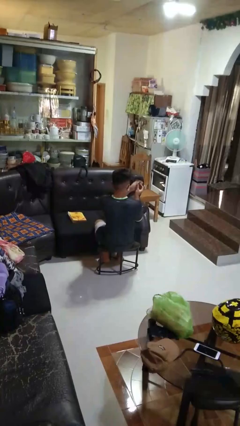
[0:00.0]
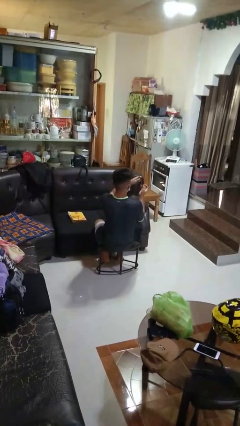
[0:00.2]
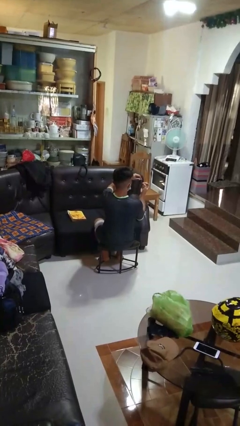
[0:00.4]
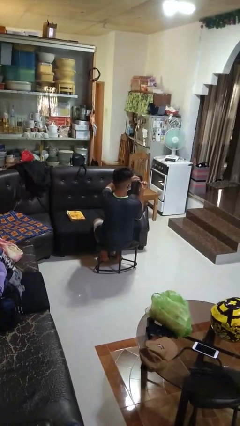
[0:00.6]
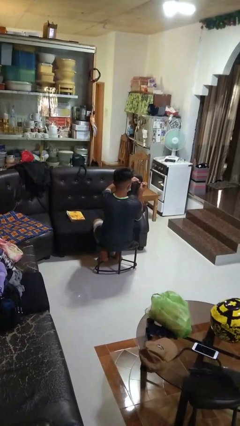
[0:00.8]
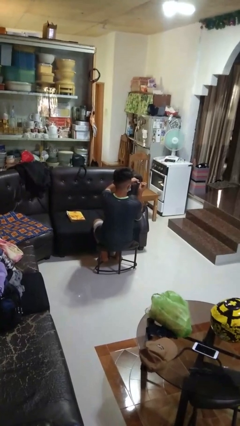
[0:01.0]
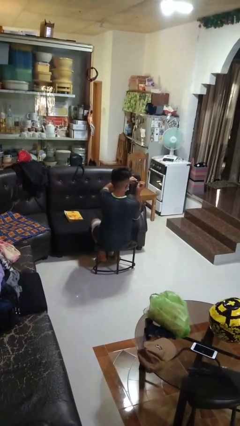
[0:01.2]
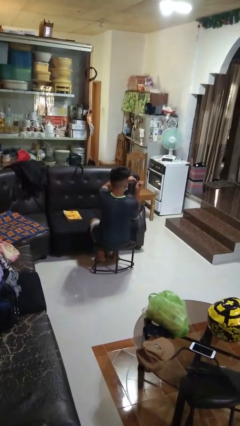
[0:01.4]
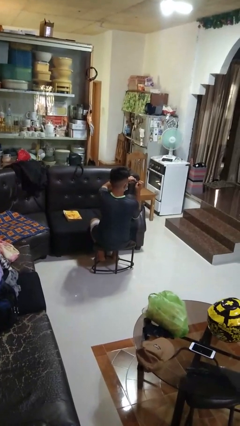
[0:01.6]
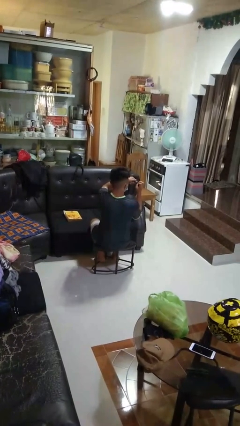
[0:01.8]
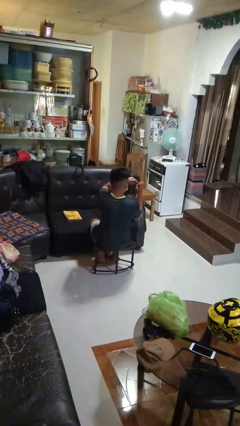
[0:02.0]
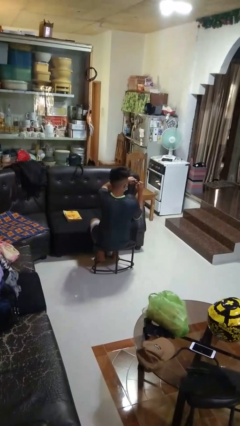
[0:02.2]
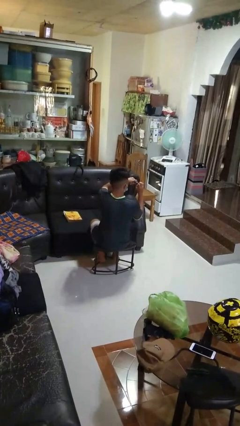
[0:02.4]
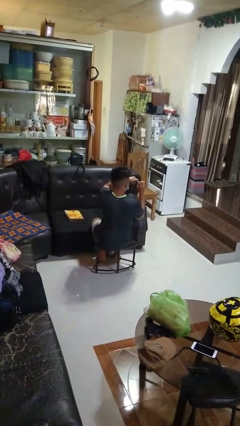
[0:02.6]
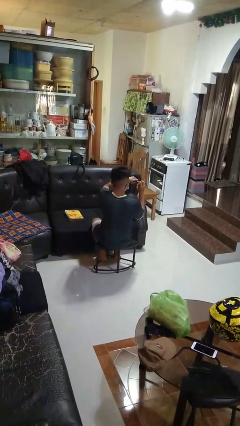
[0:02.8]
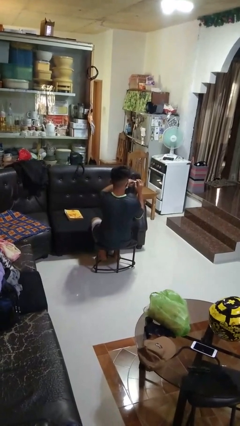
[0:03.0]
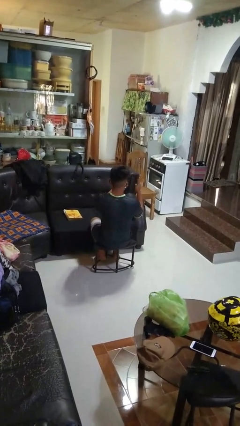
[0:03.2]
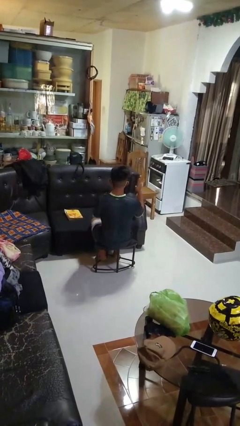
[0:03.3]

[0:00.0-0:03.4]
person clips fingernails

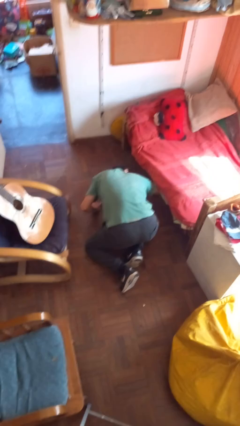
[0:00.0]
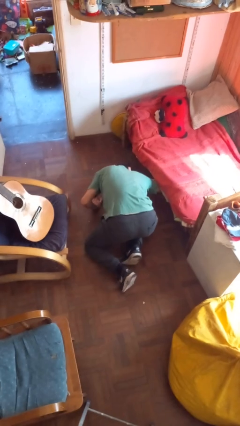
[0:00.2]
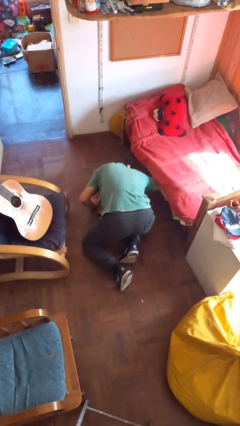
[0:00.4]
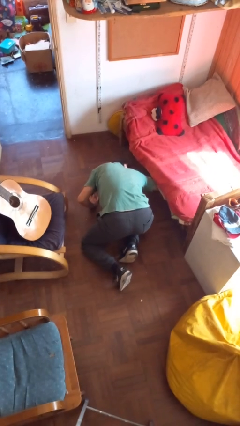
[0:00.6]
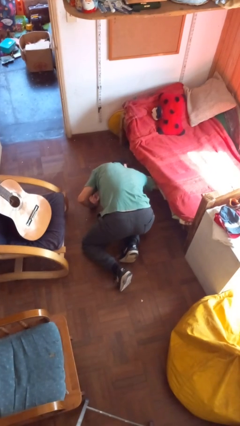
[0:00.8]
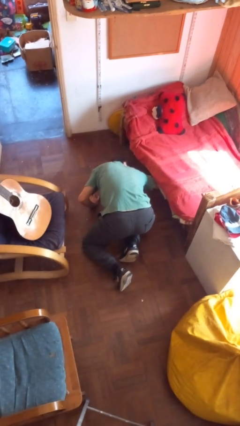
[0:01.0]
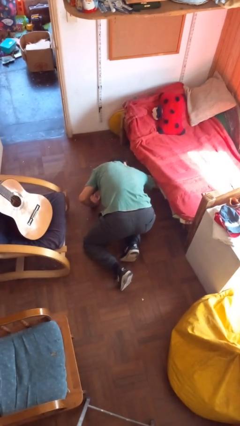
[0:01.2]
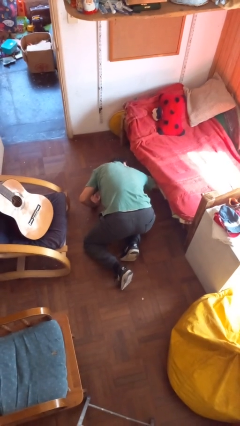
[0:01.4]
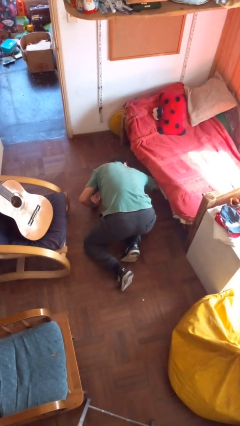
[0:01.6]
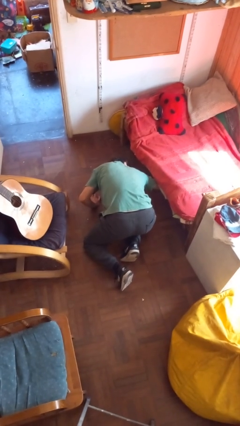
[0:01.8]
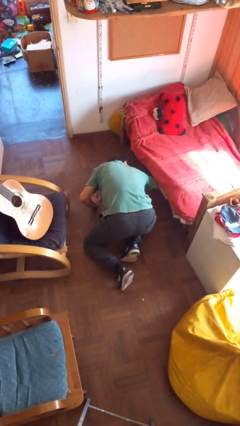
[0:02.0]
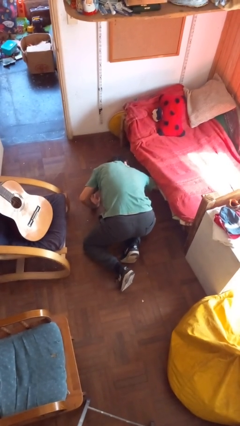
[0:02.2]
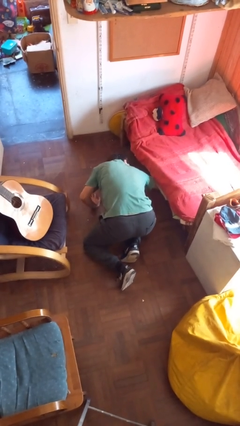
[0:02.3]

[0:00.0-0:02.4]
person searches under bed

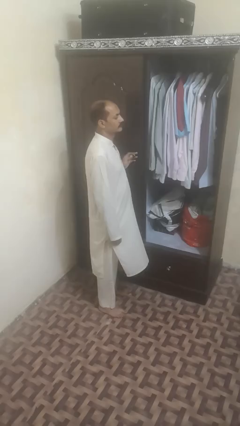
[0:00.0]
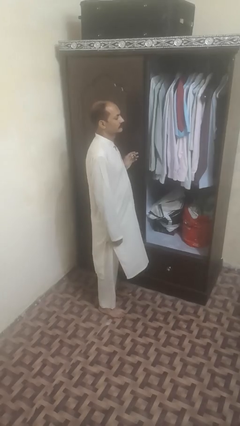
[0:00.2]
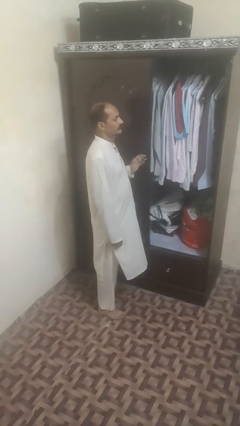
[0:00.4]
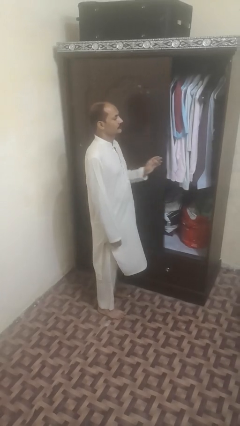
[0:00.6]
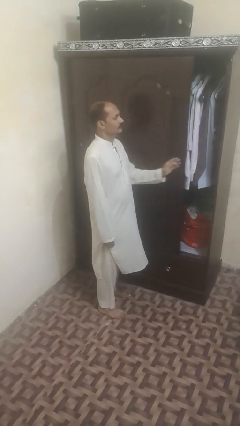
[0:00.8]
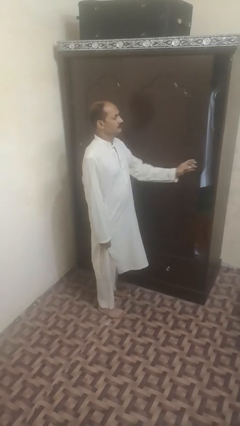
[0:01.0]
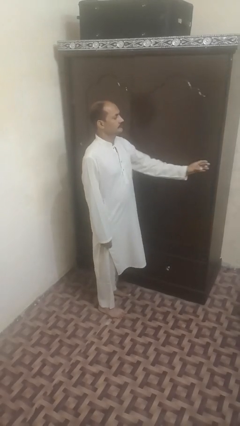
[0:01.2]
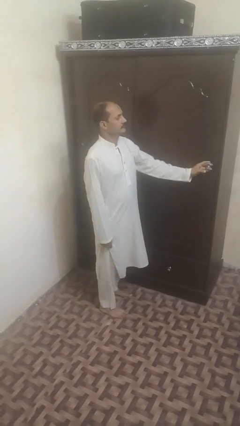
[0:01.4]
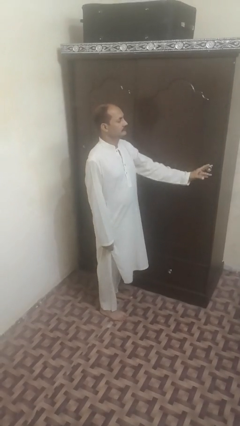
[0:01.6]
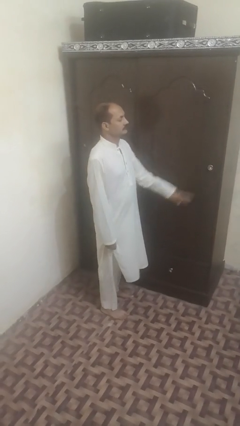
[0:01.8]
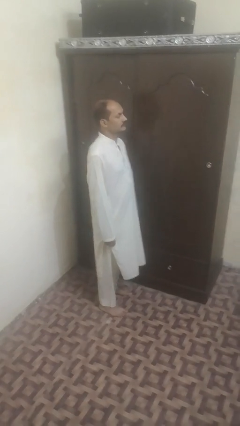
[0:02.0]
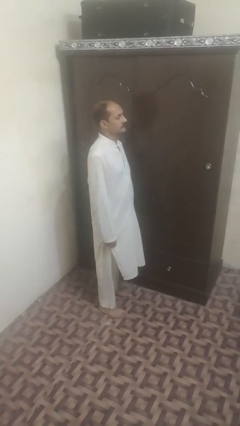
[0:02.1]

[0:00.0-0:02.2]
person closes sliding door

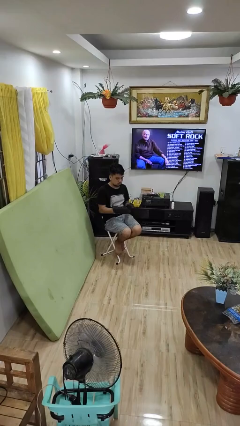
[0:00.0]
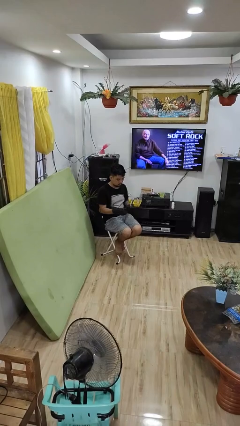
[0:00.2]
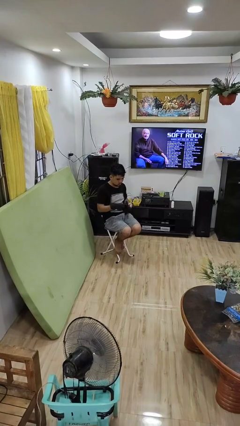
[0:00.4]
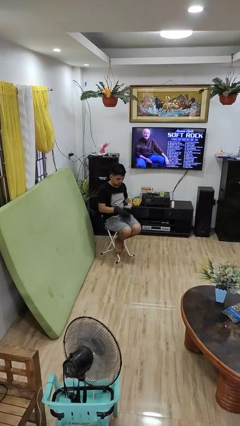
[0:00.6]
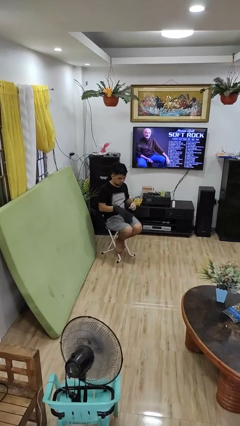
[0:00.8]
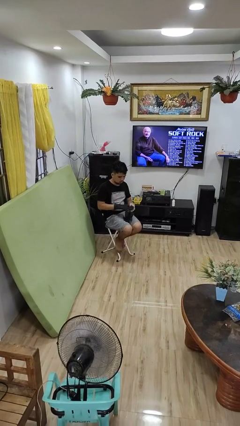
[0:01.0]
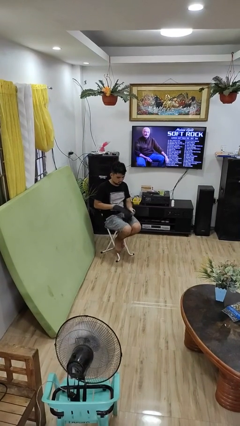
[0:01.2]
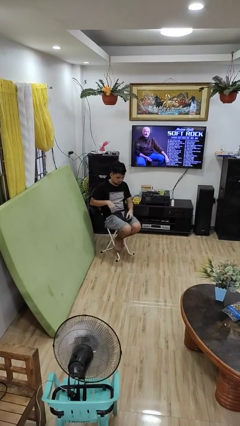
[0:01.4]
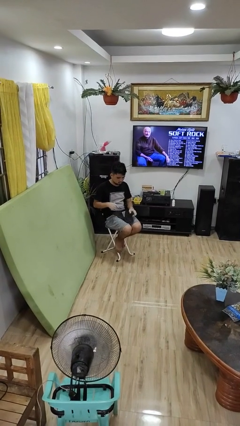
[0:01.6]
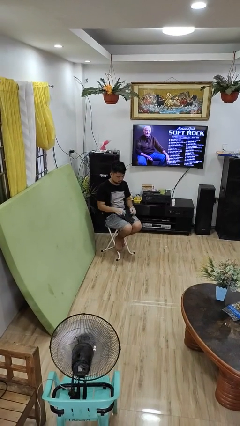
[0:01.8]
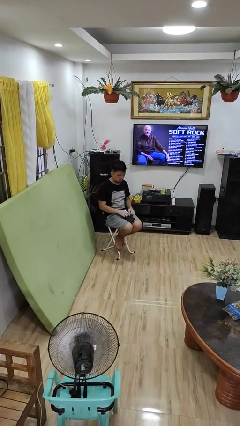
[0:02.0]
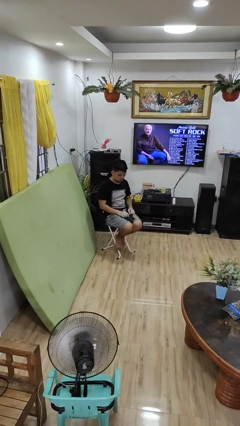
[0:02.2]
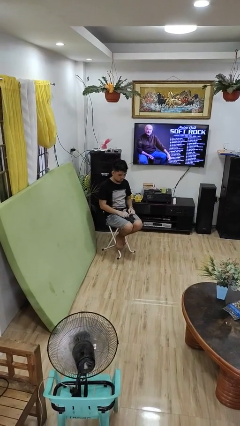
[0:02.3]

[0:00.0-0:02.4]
person takes off gloves

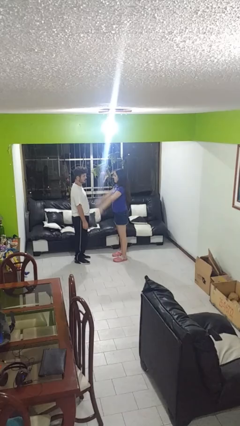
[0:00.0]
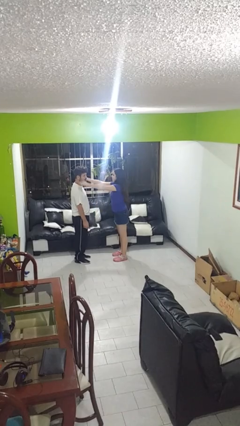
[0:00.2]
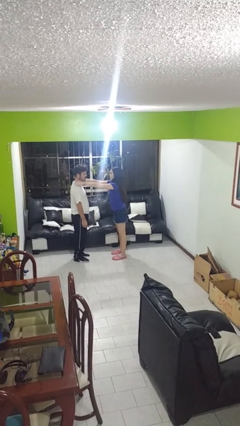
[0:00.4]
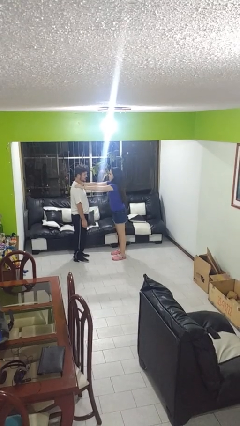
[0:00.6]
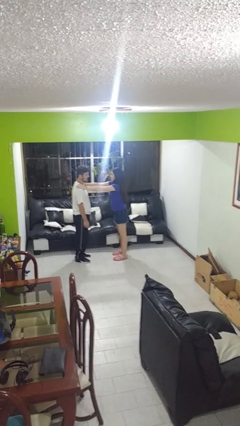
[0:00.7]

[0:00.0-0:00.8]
person grabs person by shoulder

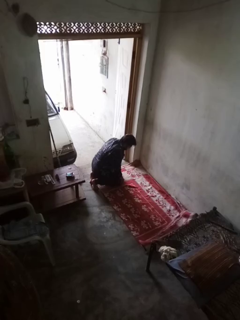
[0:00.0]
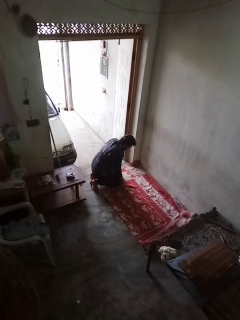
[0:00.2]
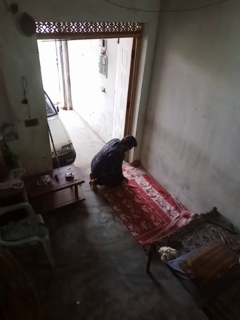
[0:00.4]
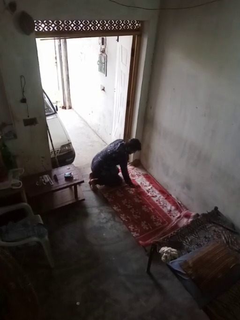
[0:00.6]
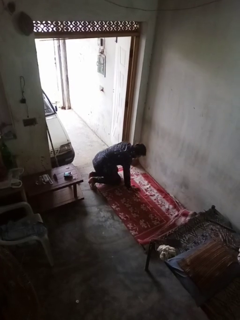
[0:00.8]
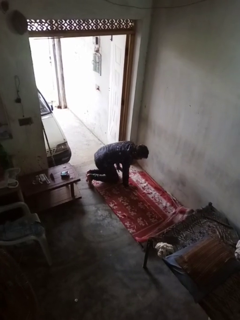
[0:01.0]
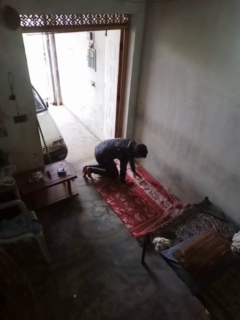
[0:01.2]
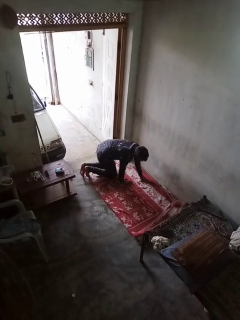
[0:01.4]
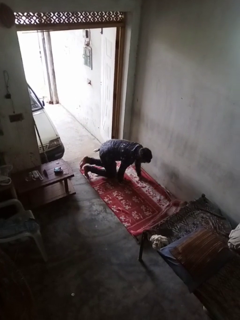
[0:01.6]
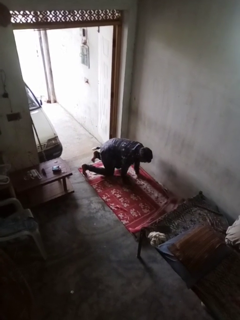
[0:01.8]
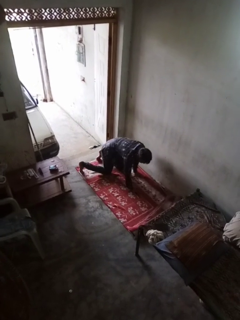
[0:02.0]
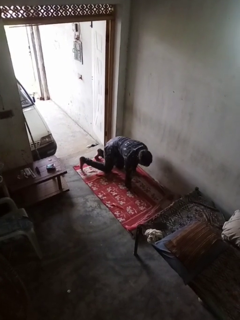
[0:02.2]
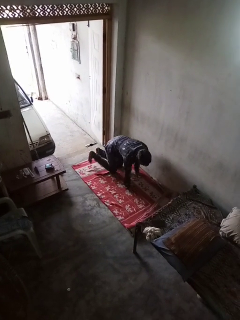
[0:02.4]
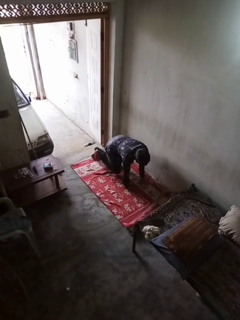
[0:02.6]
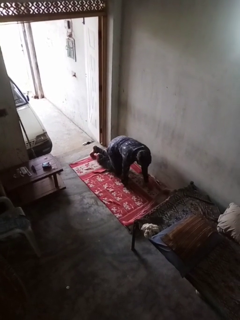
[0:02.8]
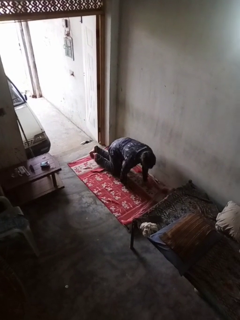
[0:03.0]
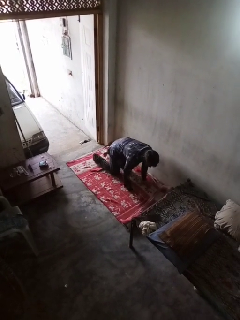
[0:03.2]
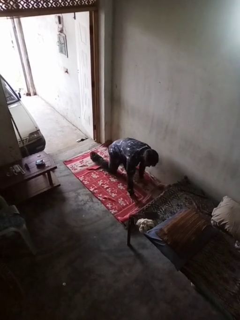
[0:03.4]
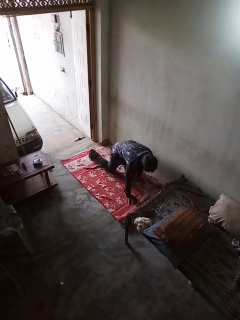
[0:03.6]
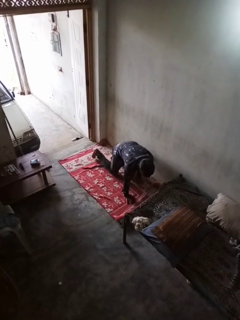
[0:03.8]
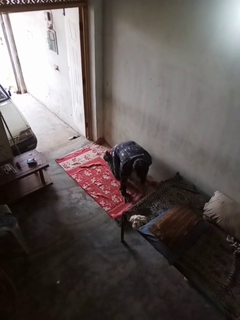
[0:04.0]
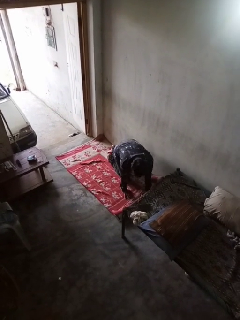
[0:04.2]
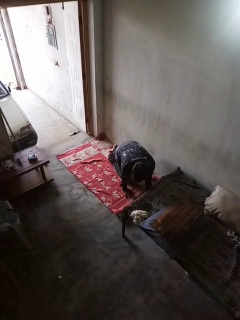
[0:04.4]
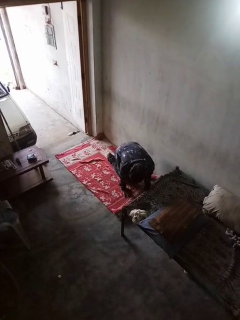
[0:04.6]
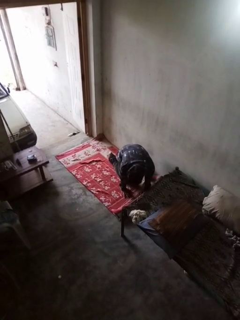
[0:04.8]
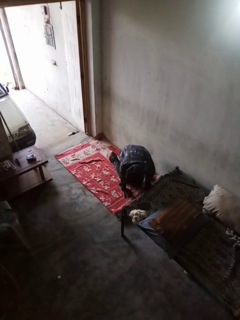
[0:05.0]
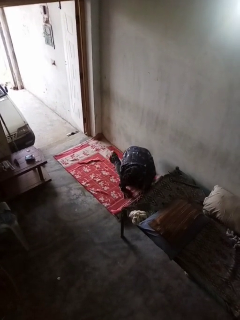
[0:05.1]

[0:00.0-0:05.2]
person crawls

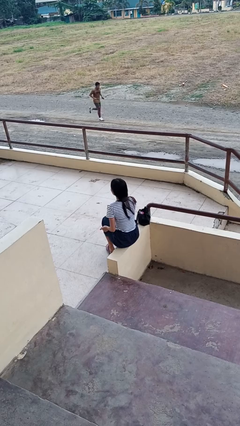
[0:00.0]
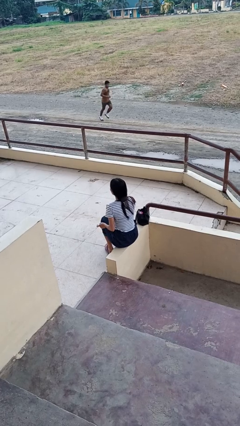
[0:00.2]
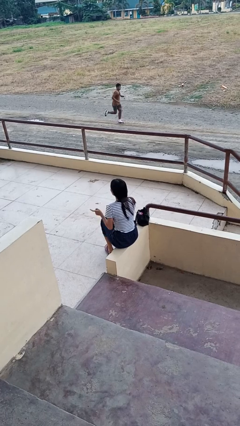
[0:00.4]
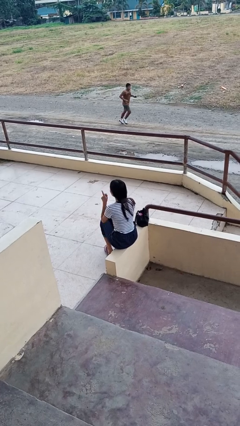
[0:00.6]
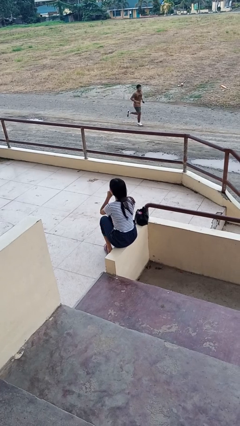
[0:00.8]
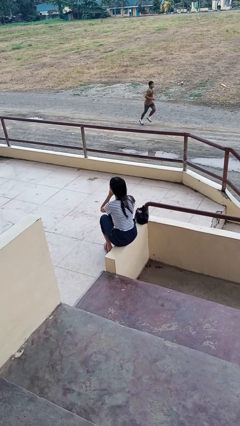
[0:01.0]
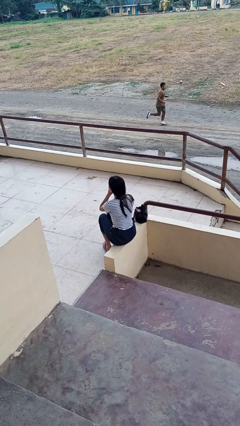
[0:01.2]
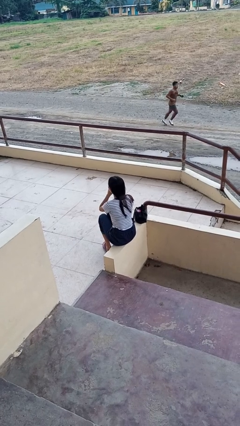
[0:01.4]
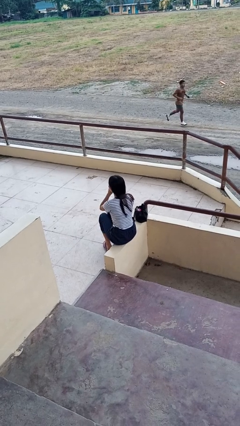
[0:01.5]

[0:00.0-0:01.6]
person gestures be quiet
